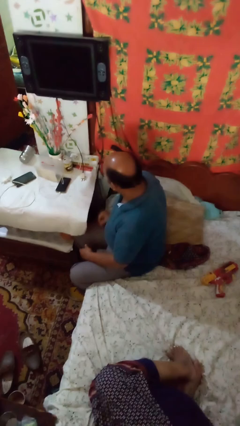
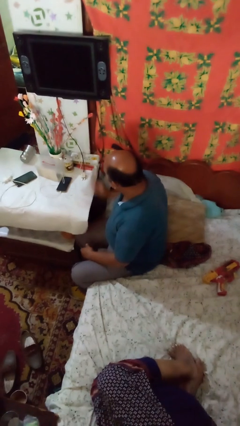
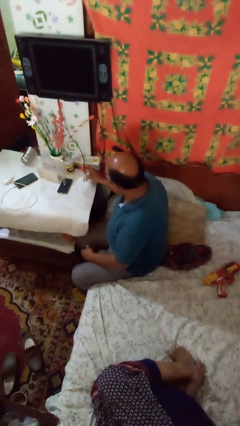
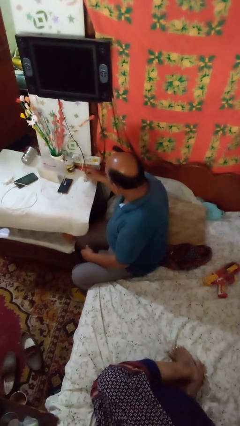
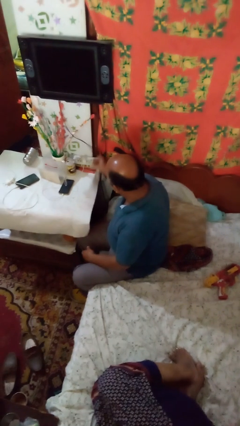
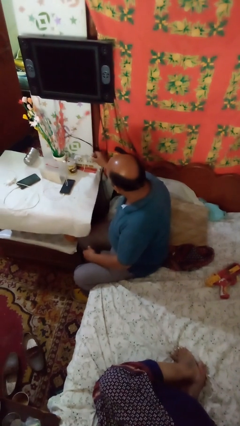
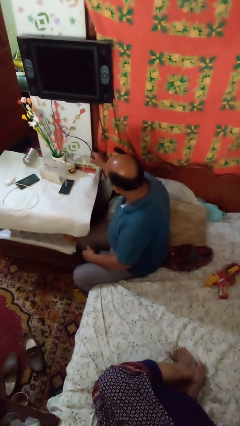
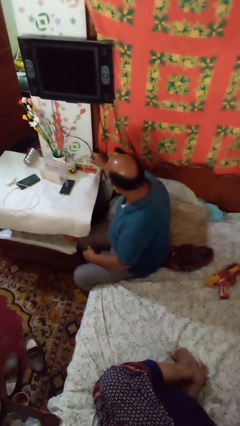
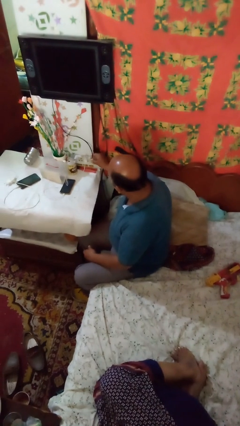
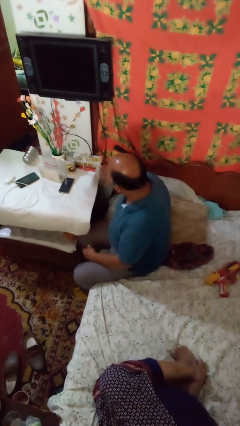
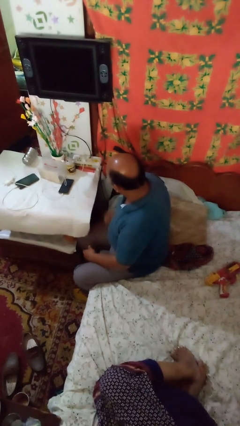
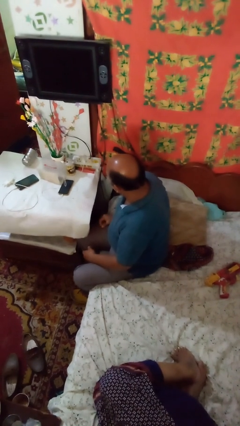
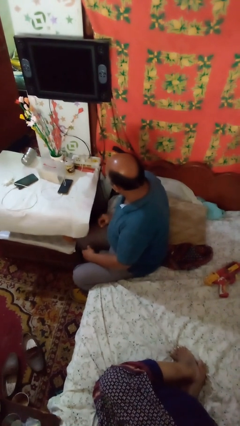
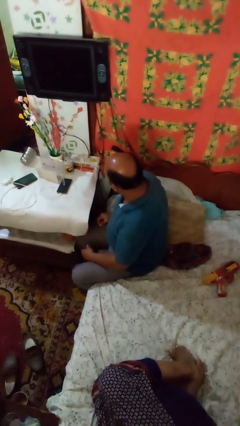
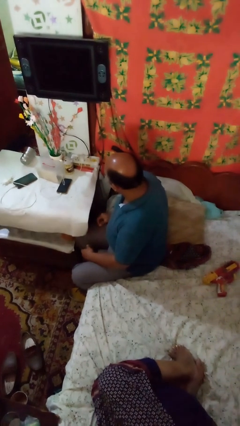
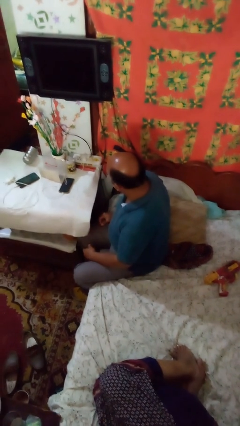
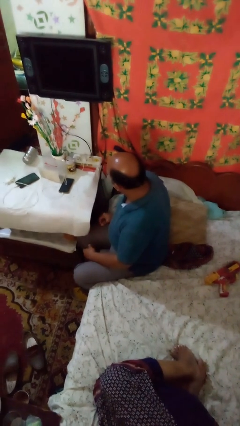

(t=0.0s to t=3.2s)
person plugs into electrical socket

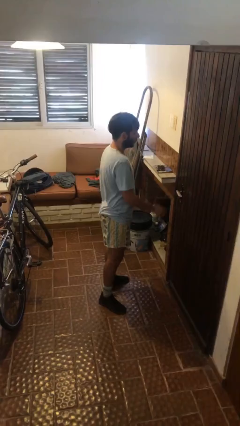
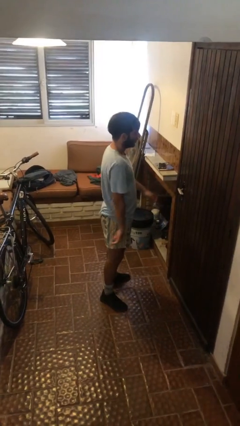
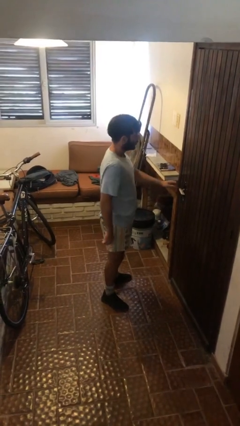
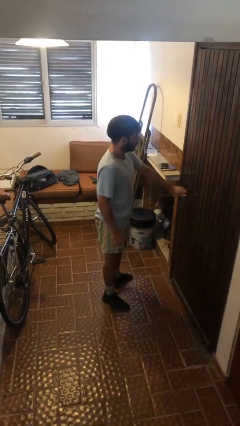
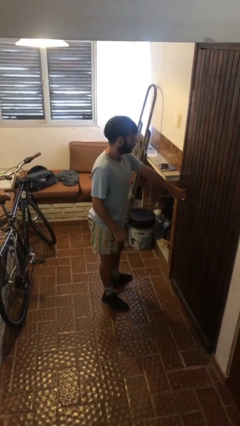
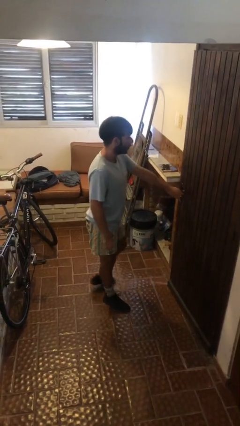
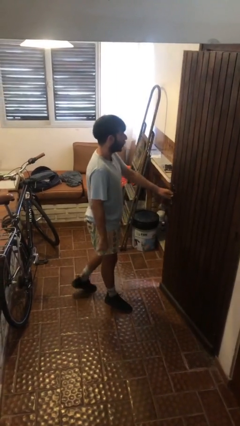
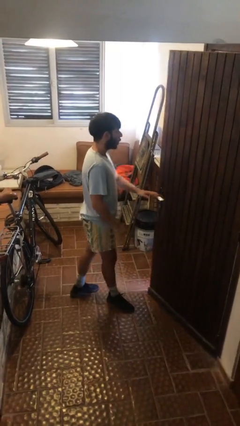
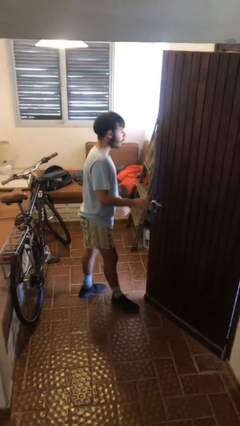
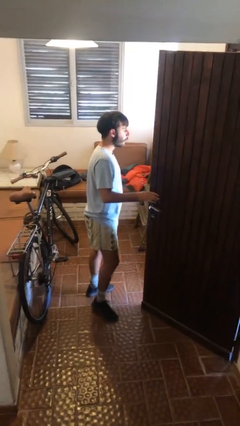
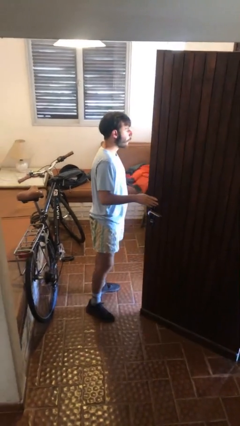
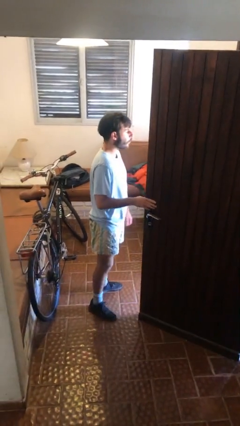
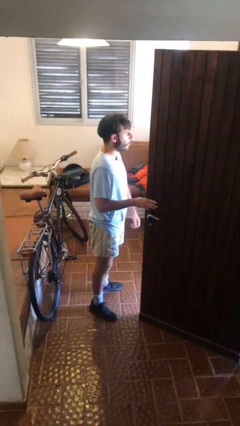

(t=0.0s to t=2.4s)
person opens facility door

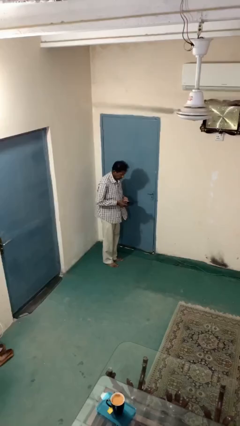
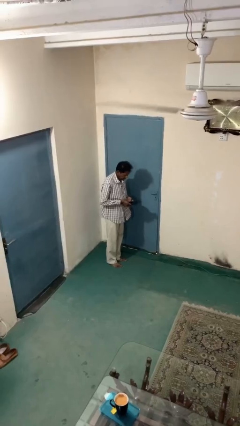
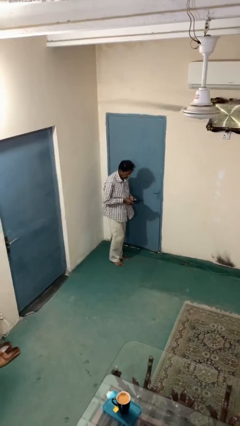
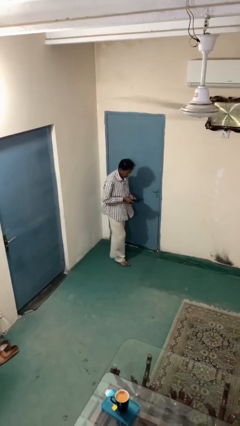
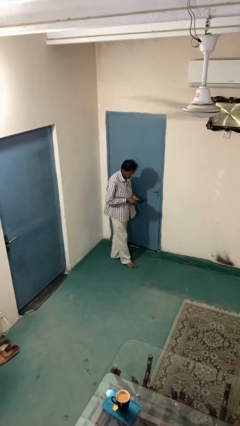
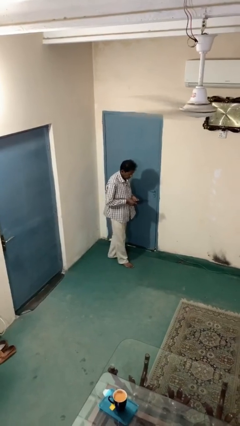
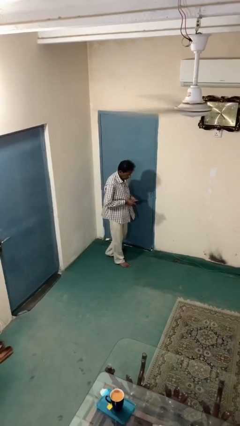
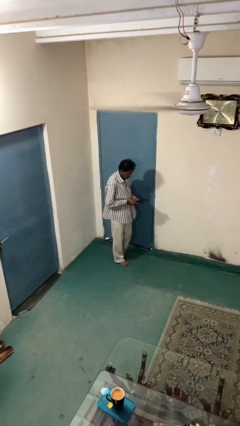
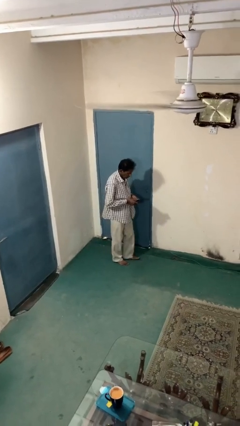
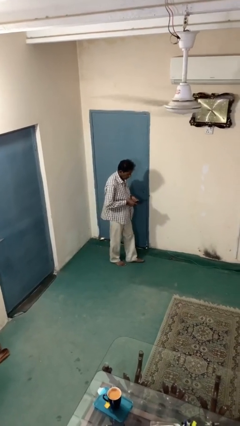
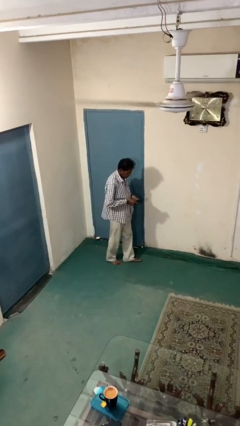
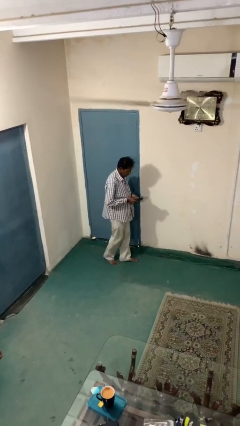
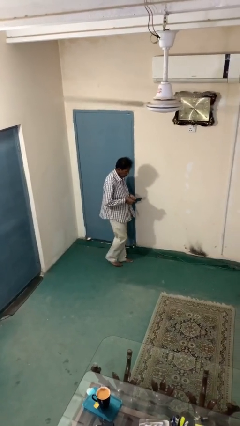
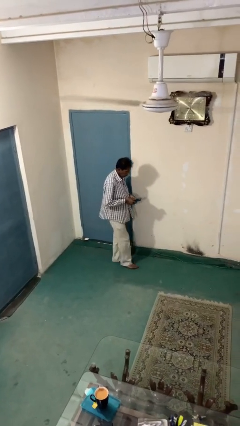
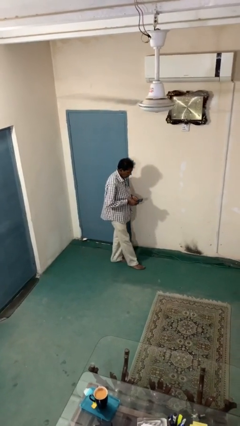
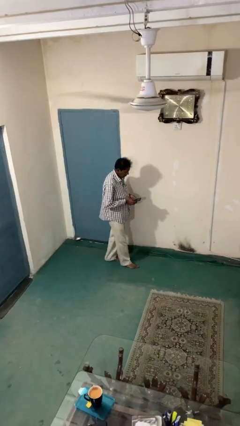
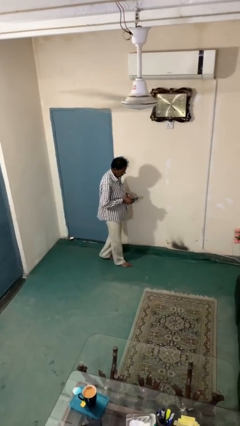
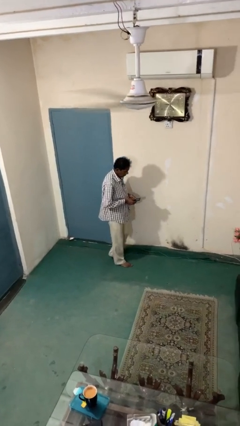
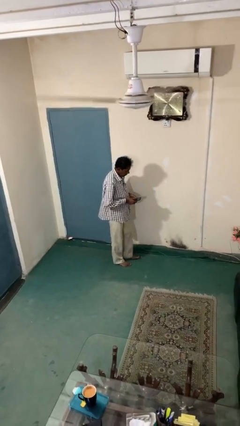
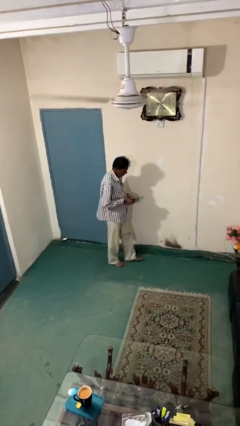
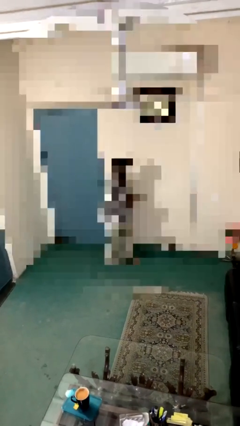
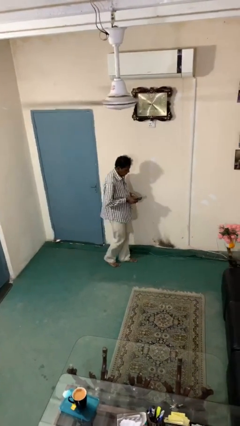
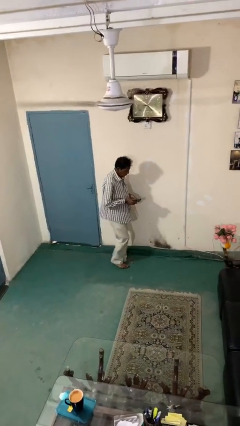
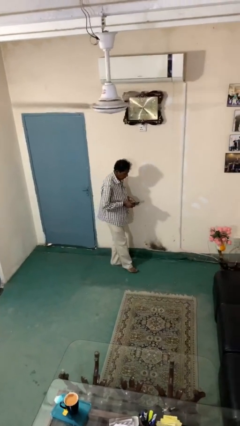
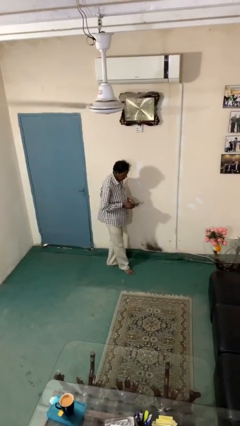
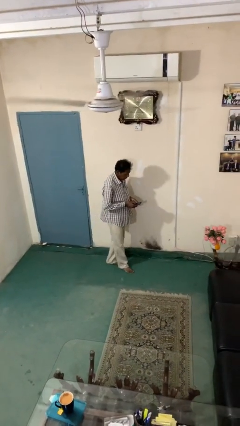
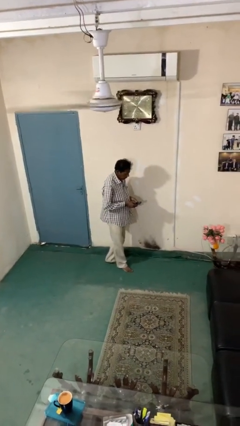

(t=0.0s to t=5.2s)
person texts on phone

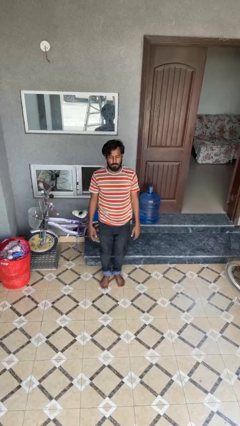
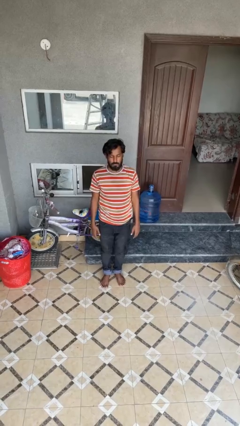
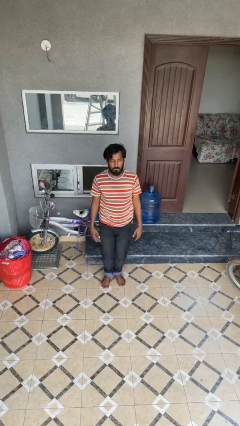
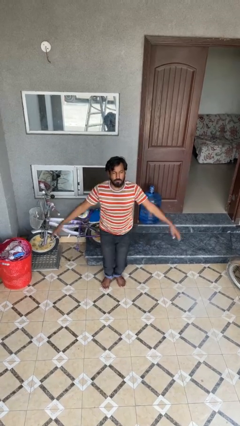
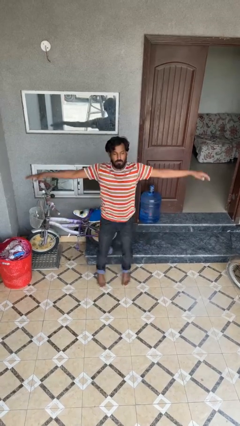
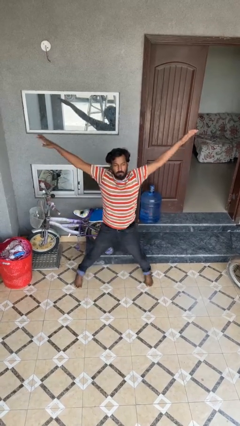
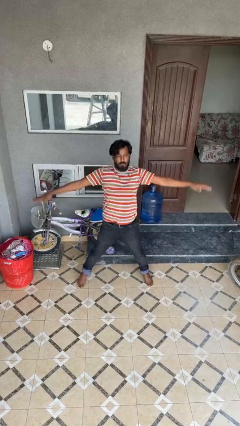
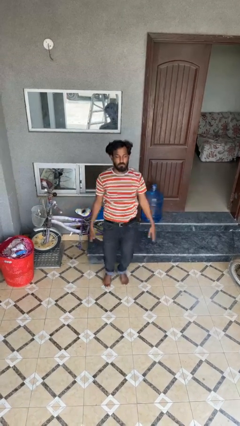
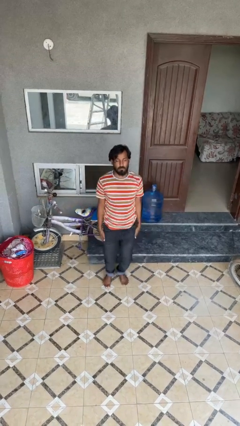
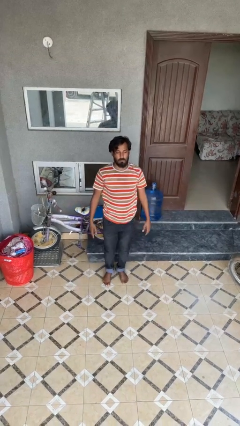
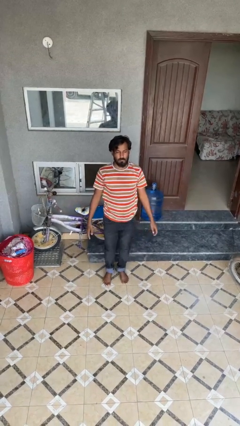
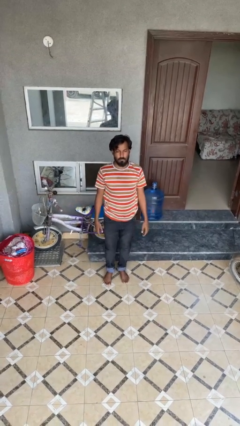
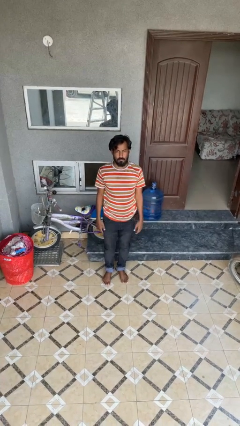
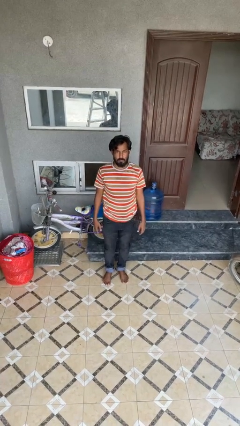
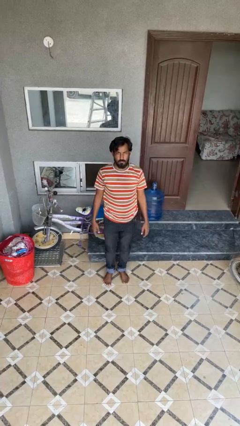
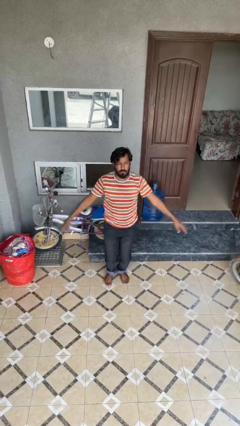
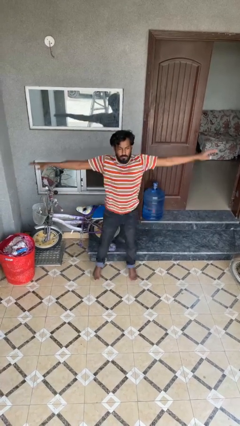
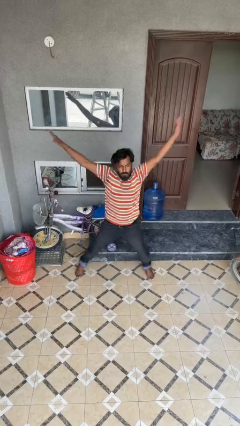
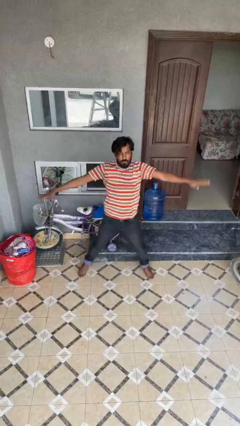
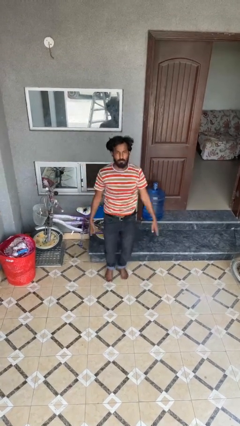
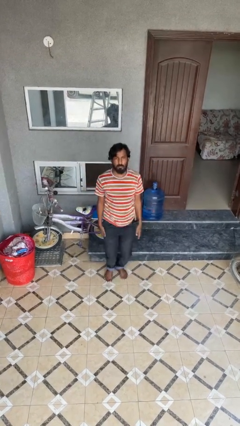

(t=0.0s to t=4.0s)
person exercises with jumping jacks

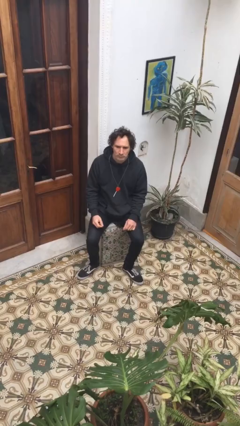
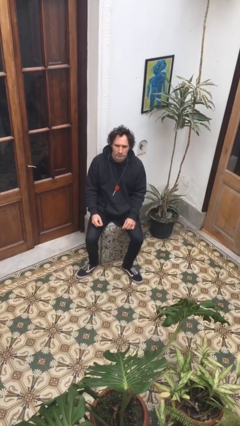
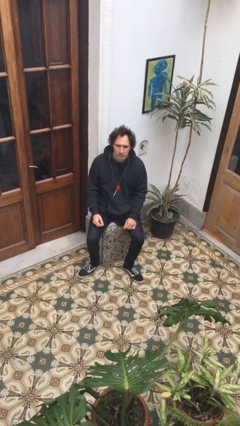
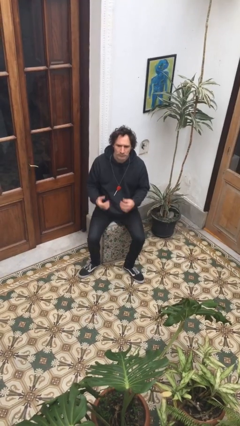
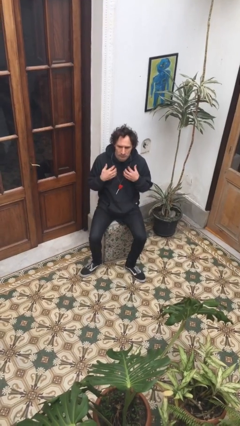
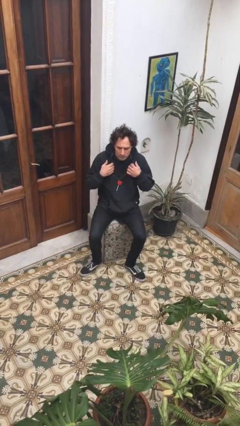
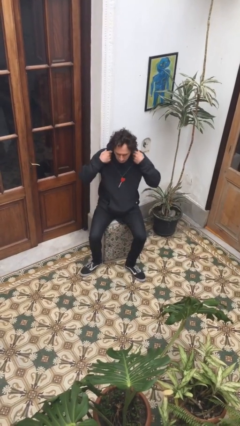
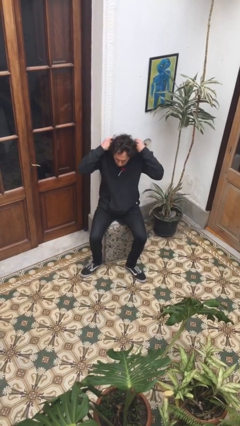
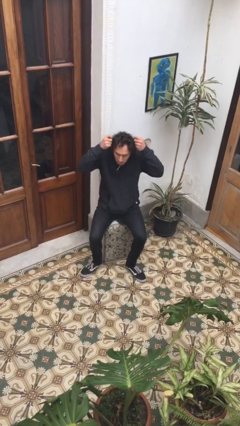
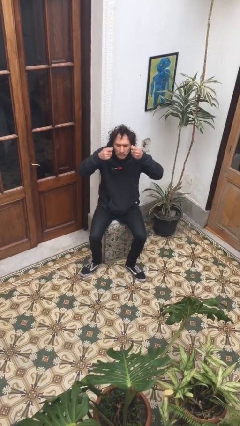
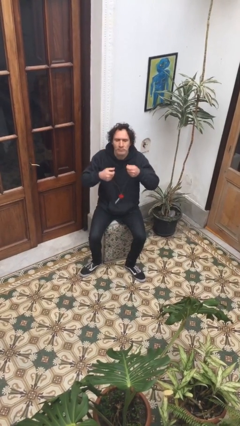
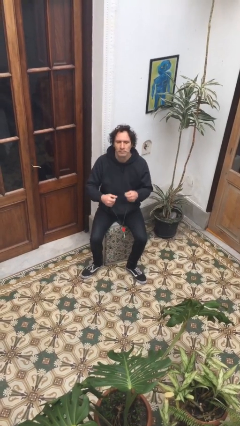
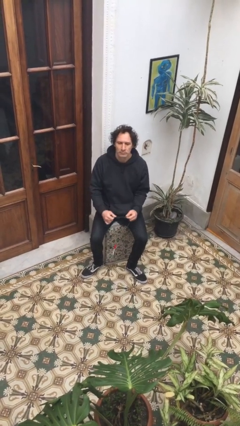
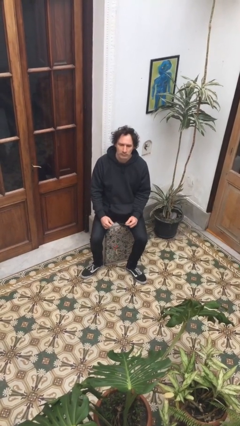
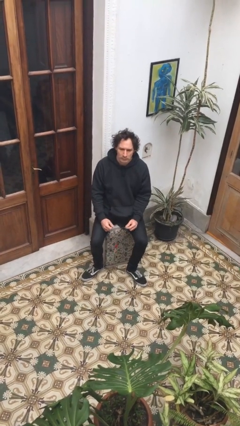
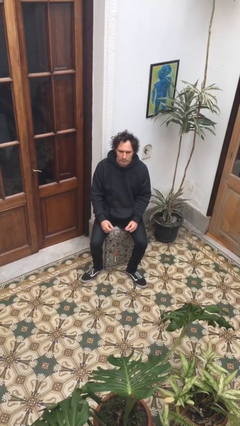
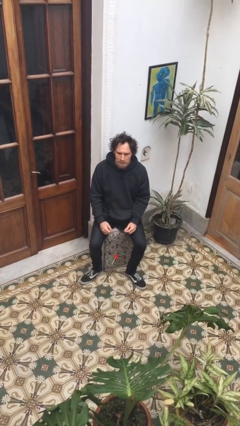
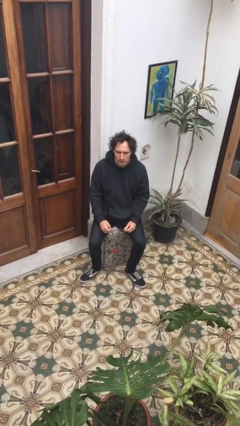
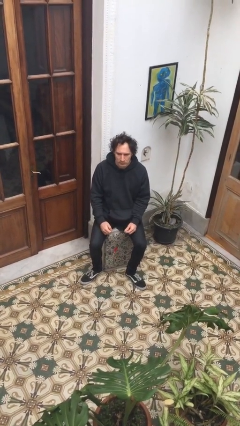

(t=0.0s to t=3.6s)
person takes off necklace
